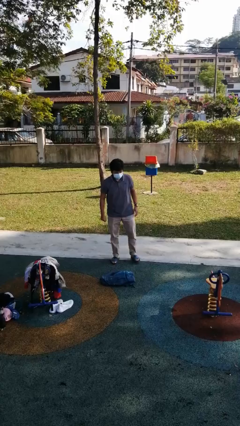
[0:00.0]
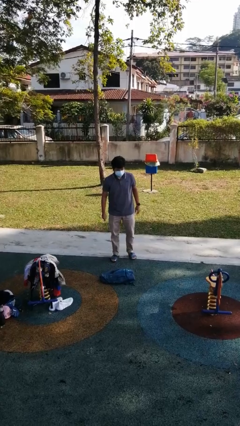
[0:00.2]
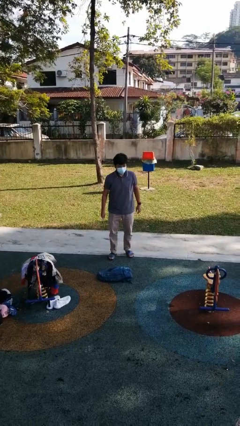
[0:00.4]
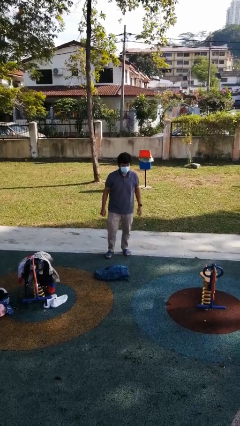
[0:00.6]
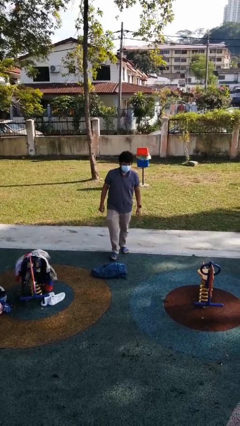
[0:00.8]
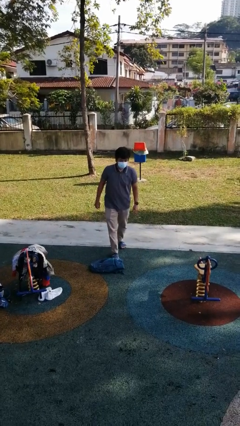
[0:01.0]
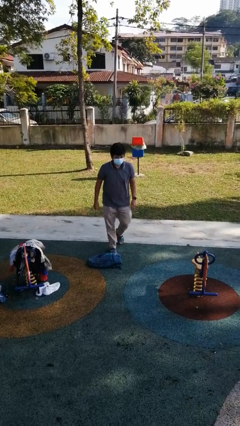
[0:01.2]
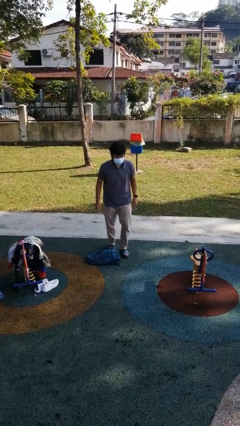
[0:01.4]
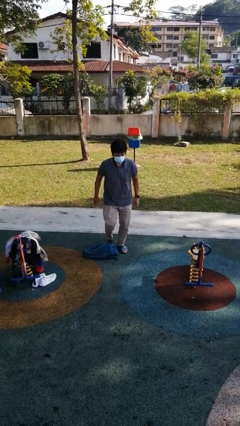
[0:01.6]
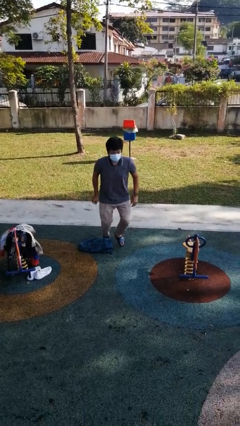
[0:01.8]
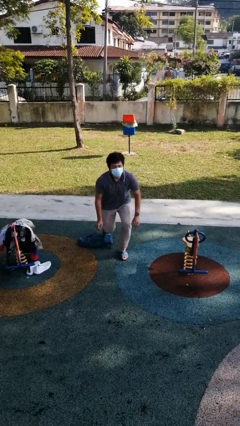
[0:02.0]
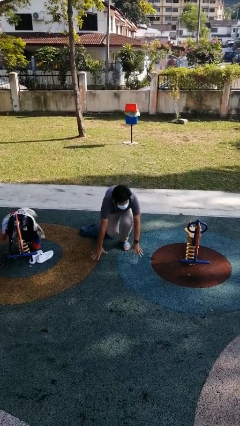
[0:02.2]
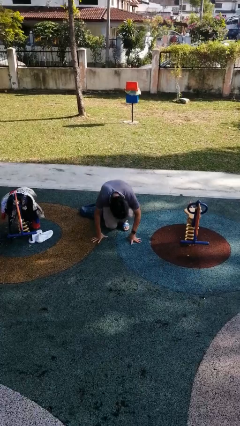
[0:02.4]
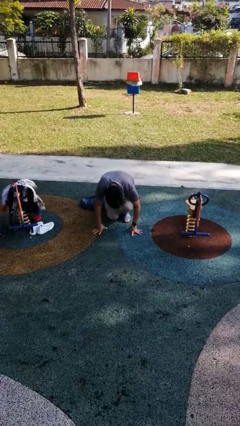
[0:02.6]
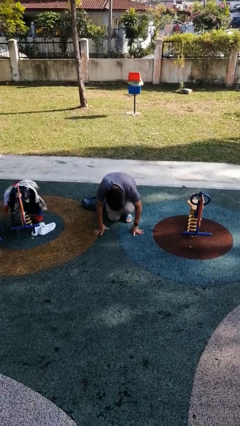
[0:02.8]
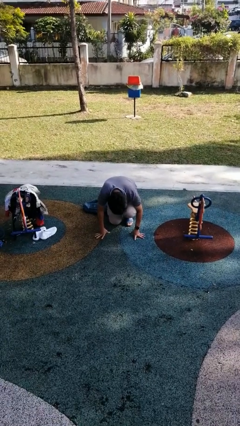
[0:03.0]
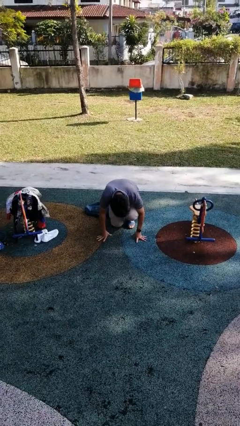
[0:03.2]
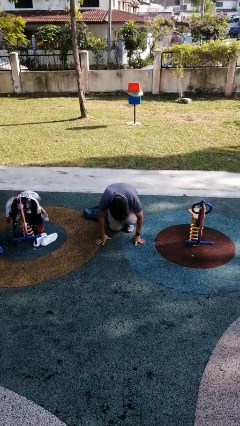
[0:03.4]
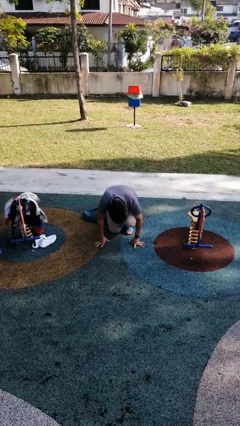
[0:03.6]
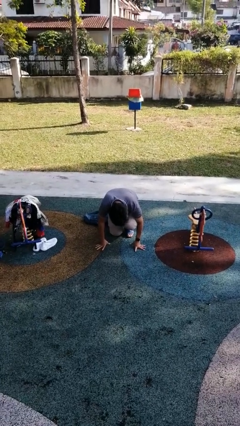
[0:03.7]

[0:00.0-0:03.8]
person trips on object on floor

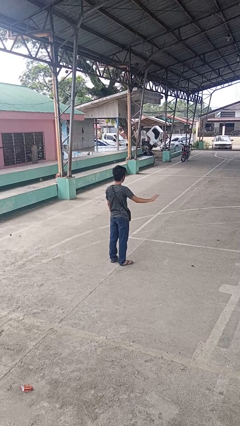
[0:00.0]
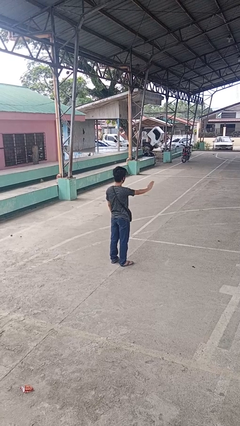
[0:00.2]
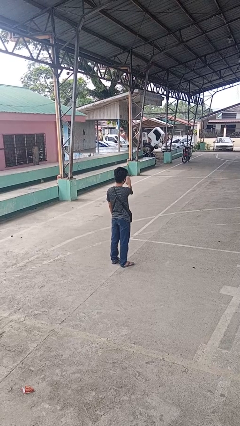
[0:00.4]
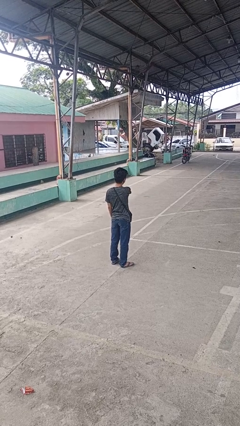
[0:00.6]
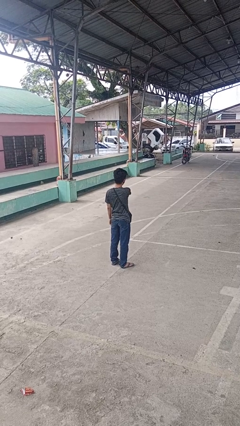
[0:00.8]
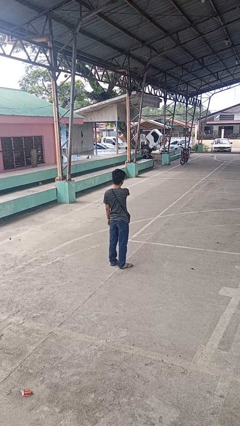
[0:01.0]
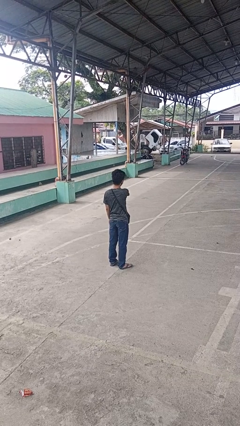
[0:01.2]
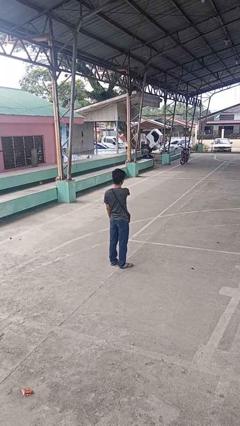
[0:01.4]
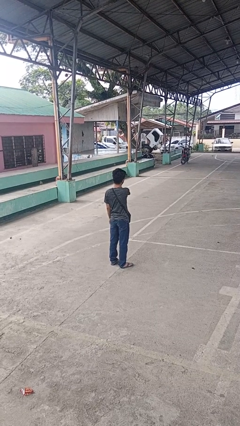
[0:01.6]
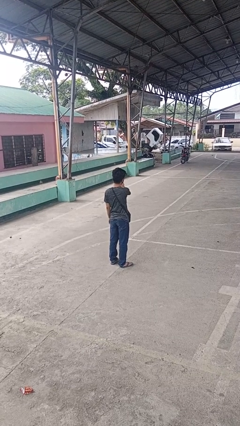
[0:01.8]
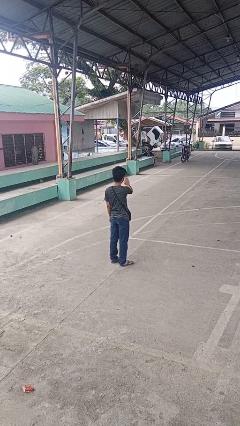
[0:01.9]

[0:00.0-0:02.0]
person gestures swipe left

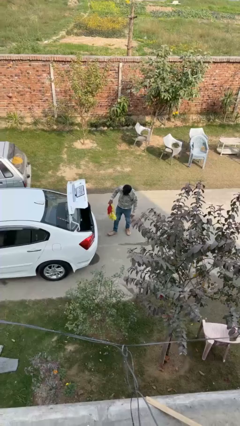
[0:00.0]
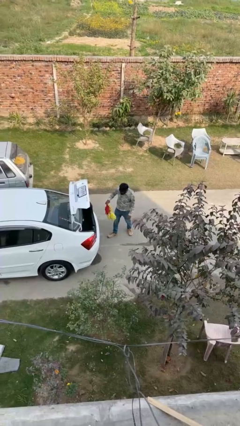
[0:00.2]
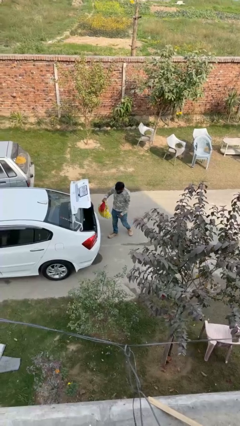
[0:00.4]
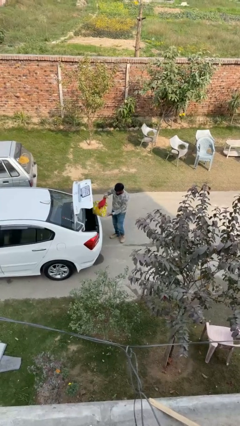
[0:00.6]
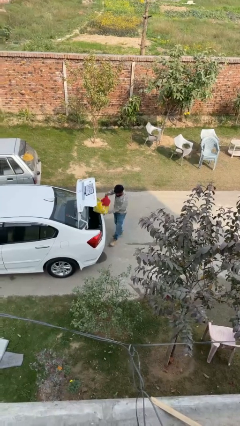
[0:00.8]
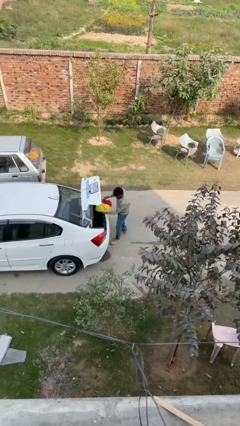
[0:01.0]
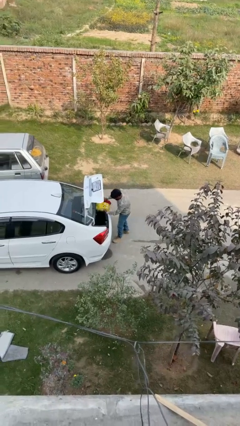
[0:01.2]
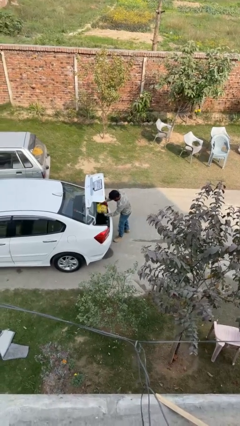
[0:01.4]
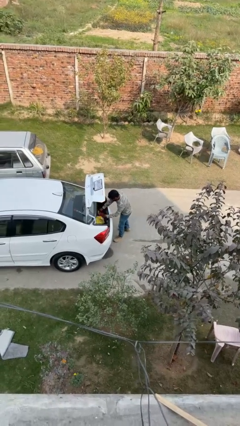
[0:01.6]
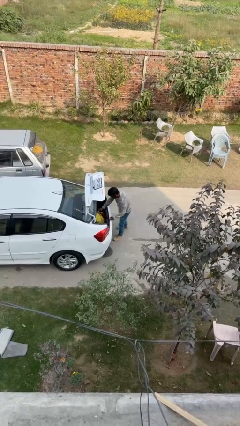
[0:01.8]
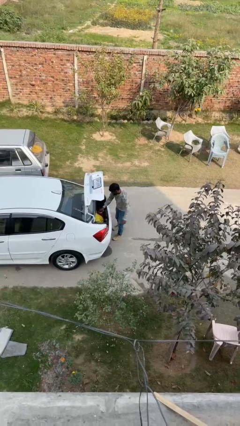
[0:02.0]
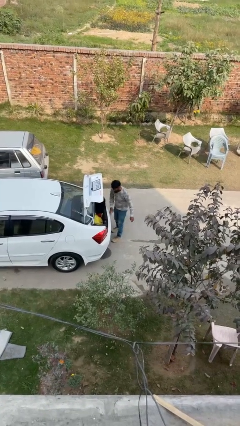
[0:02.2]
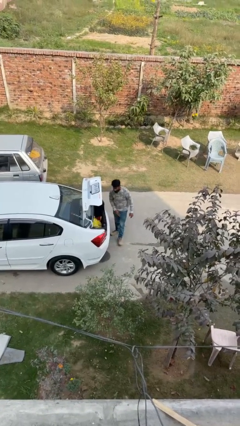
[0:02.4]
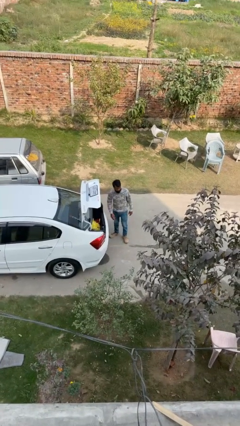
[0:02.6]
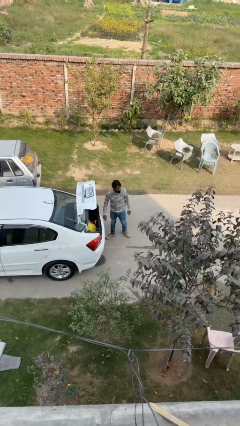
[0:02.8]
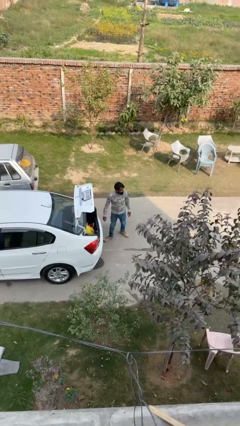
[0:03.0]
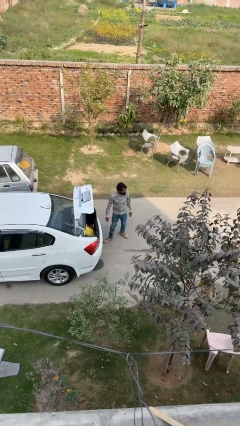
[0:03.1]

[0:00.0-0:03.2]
person loads car

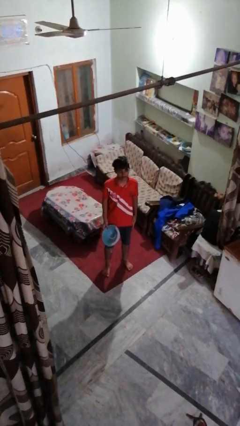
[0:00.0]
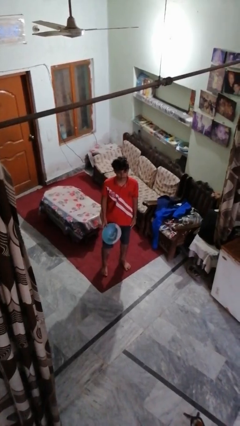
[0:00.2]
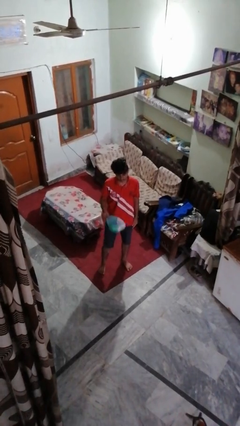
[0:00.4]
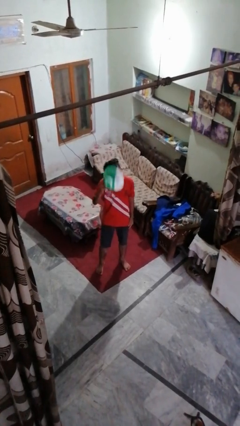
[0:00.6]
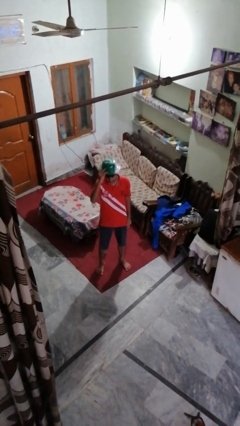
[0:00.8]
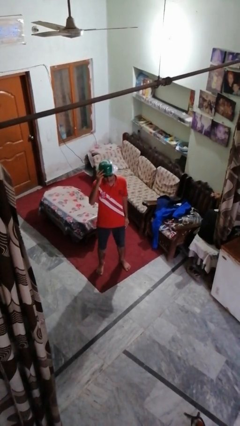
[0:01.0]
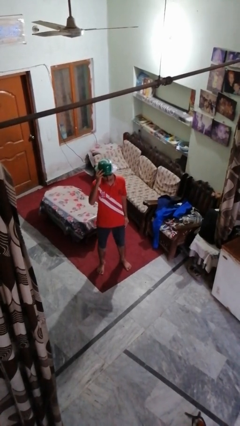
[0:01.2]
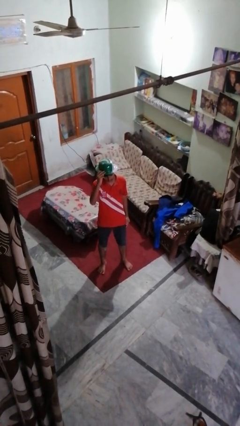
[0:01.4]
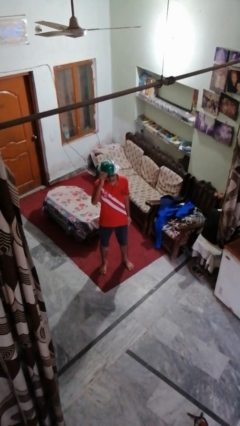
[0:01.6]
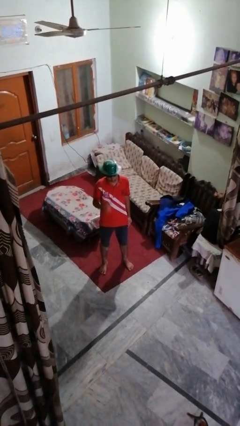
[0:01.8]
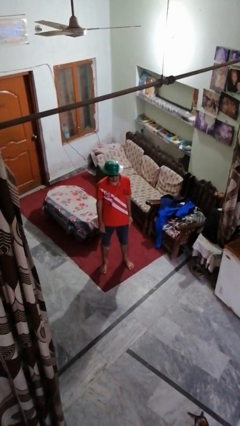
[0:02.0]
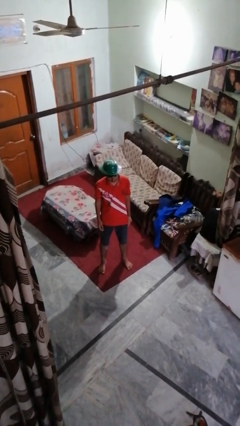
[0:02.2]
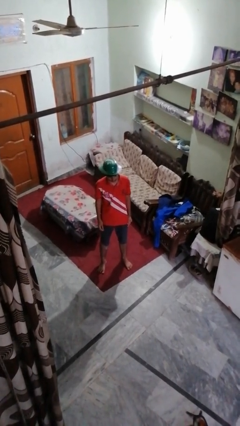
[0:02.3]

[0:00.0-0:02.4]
person puts on hat

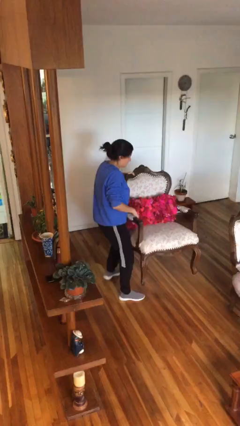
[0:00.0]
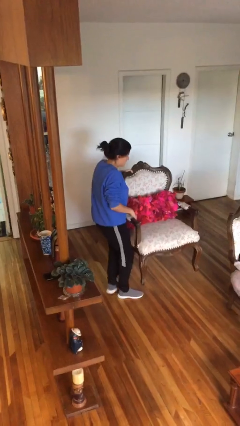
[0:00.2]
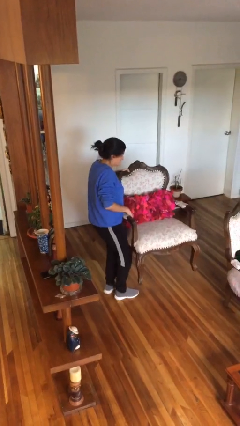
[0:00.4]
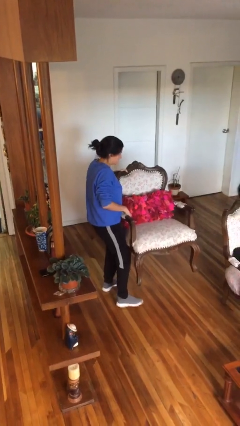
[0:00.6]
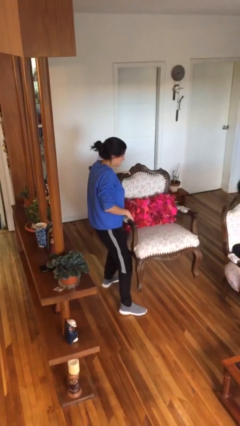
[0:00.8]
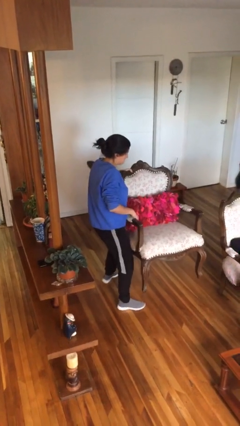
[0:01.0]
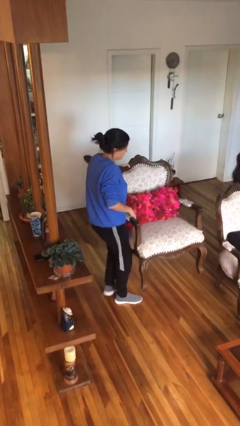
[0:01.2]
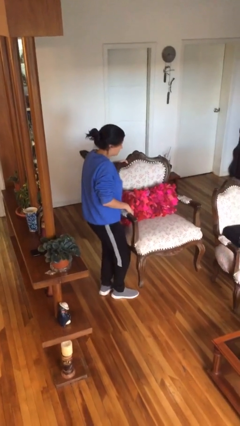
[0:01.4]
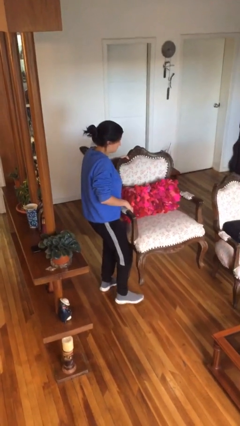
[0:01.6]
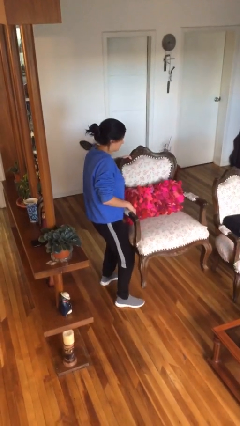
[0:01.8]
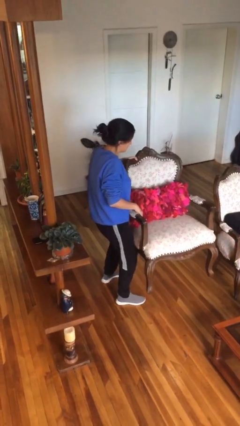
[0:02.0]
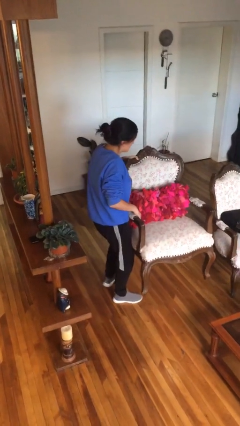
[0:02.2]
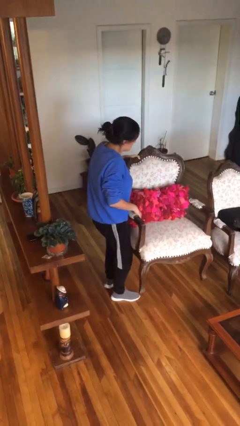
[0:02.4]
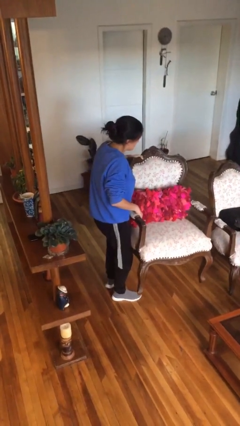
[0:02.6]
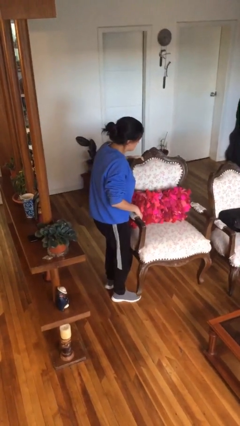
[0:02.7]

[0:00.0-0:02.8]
person carries furniture

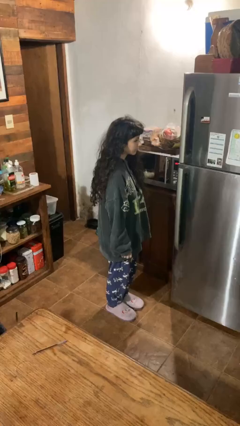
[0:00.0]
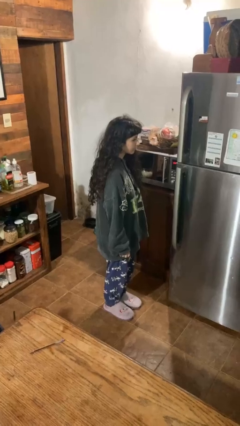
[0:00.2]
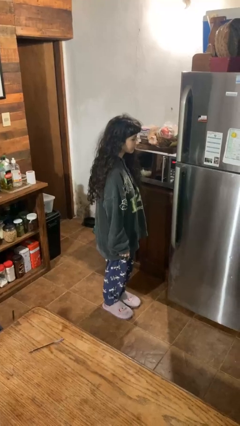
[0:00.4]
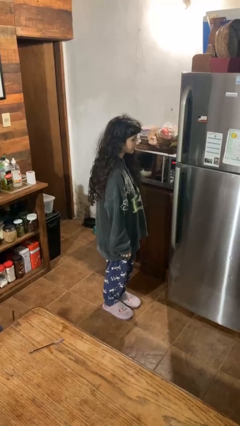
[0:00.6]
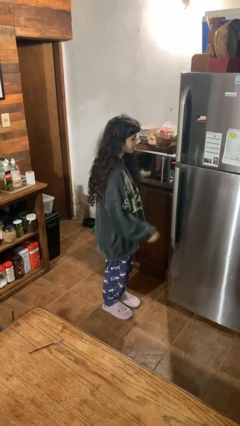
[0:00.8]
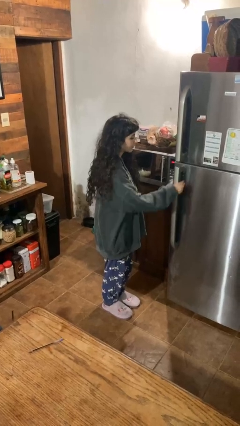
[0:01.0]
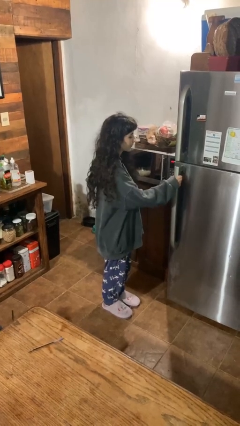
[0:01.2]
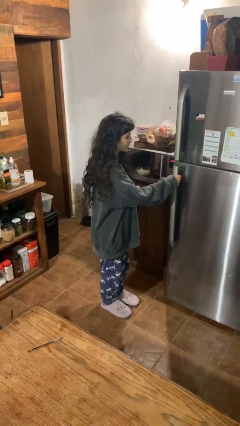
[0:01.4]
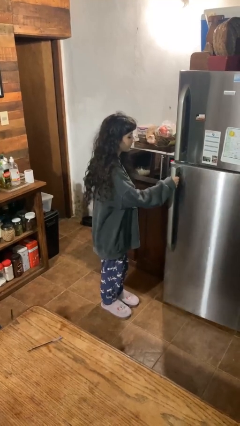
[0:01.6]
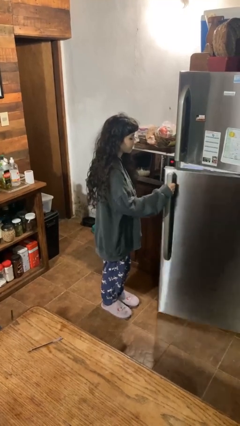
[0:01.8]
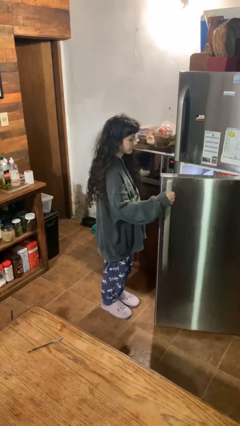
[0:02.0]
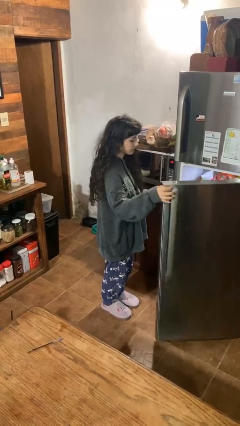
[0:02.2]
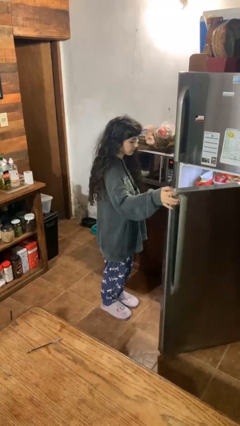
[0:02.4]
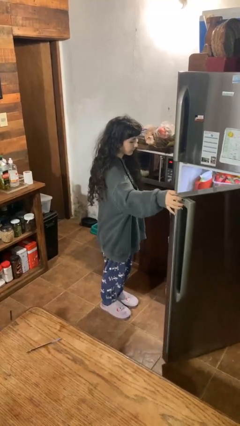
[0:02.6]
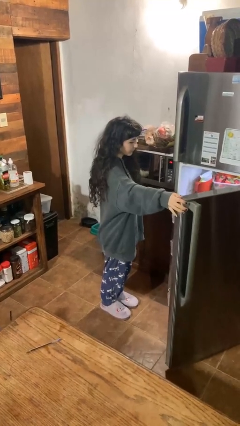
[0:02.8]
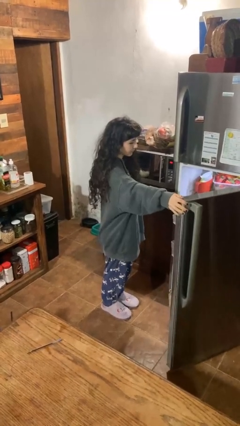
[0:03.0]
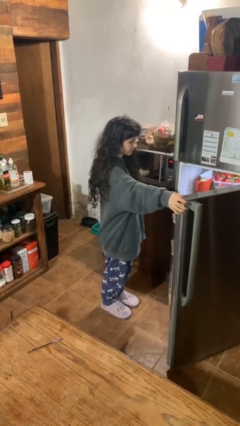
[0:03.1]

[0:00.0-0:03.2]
person opens refrigerator

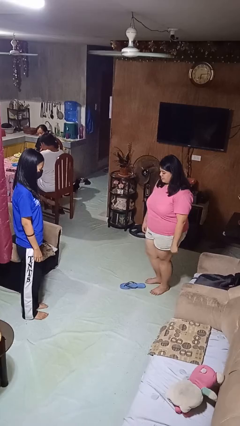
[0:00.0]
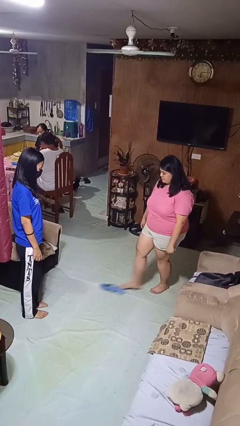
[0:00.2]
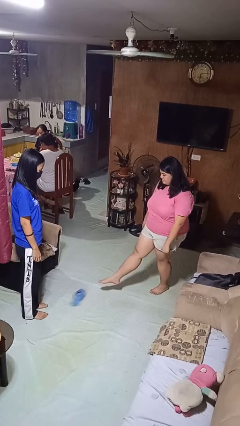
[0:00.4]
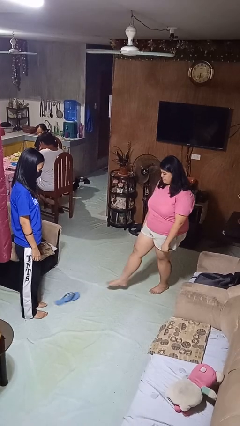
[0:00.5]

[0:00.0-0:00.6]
person kicks object to person
